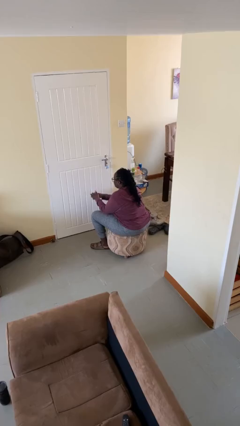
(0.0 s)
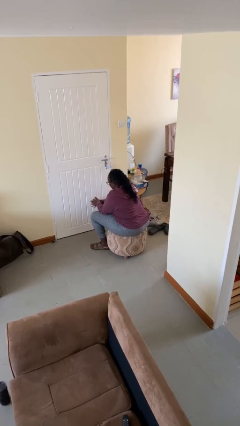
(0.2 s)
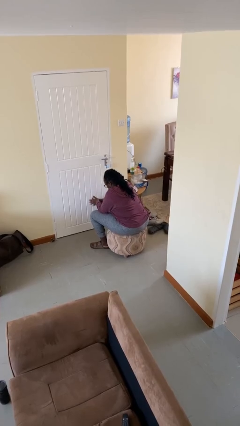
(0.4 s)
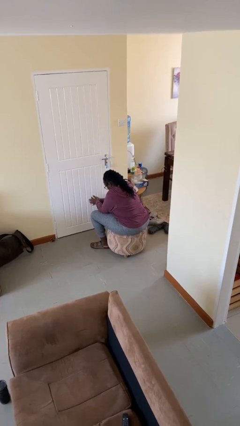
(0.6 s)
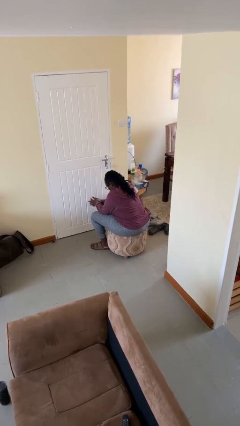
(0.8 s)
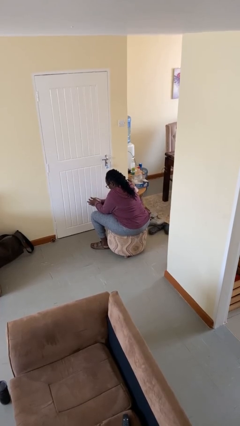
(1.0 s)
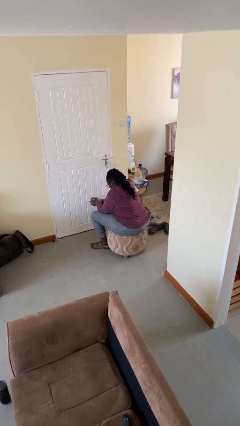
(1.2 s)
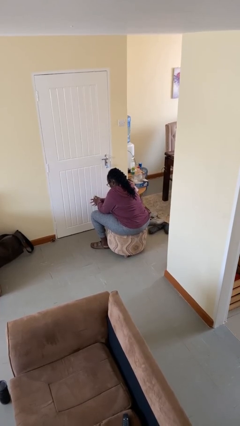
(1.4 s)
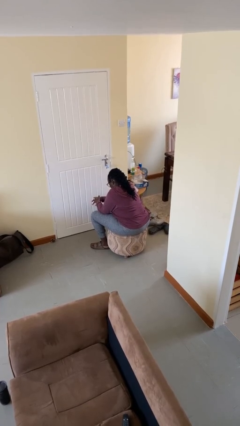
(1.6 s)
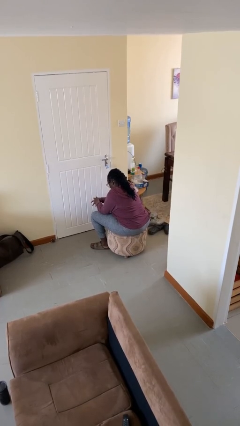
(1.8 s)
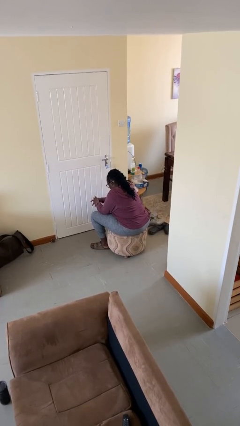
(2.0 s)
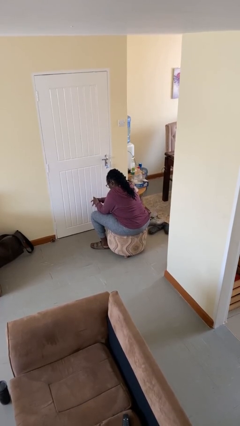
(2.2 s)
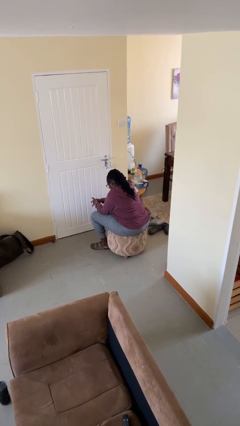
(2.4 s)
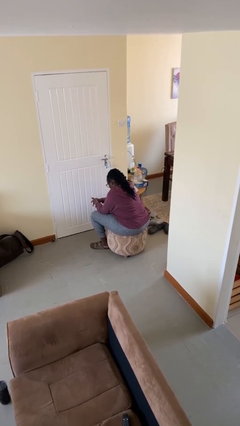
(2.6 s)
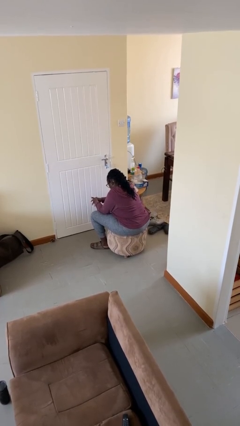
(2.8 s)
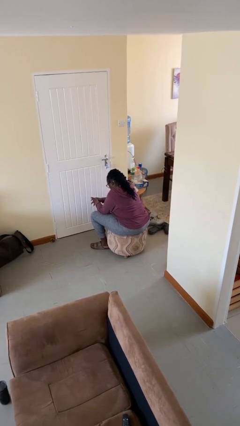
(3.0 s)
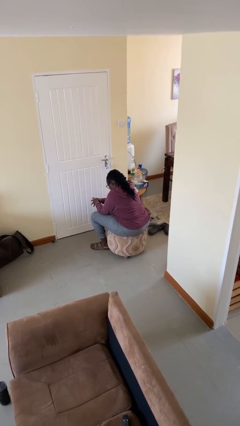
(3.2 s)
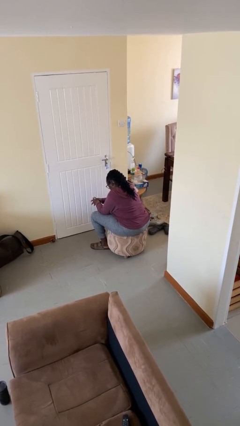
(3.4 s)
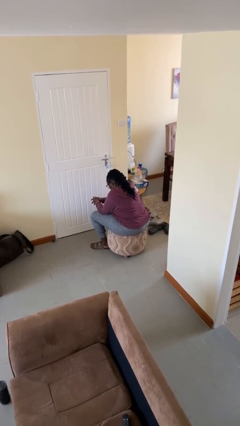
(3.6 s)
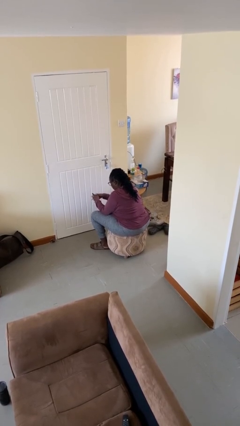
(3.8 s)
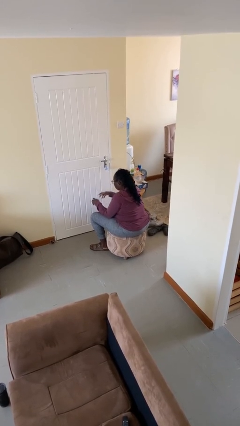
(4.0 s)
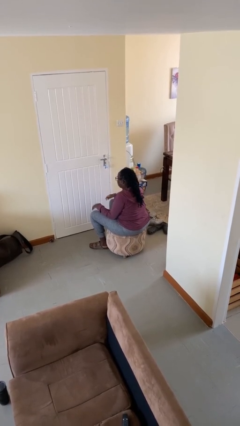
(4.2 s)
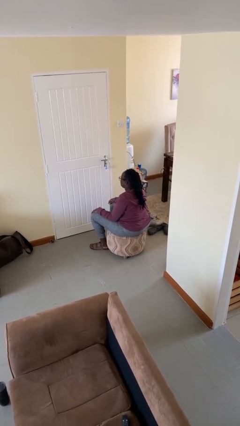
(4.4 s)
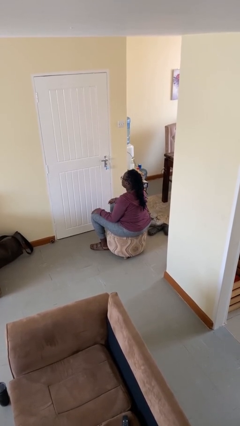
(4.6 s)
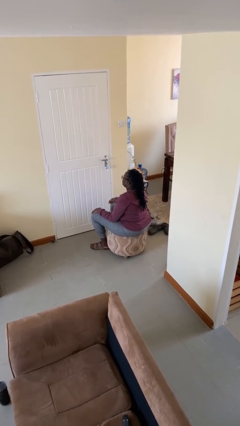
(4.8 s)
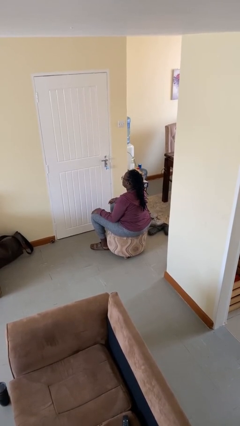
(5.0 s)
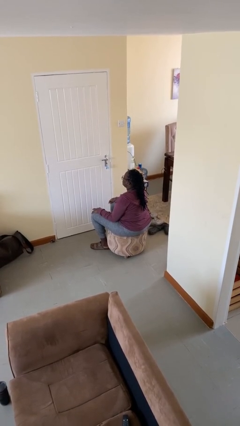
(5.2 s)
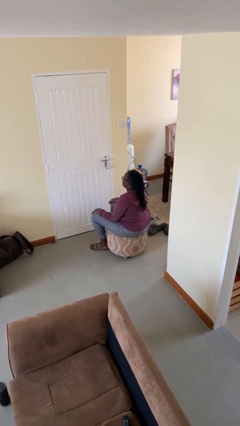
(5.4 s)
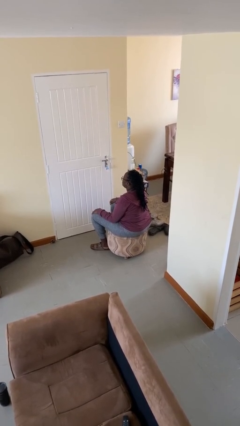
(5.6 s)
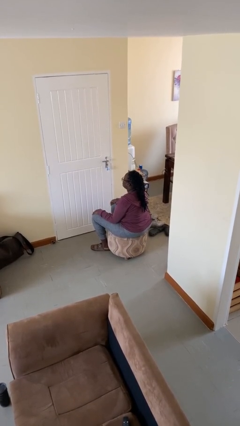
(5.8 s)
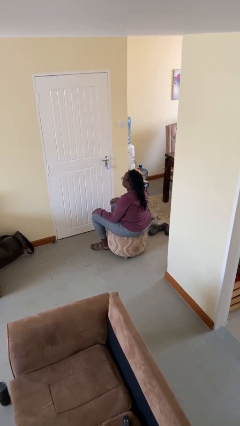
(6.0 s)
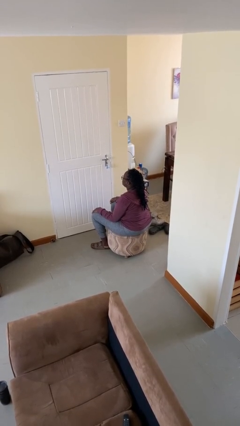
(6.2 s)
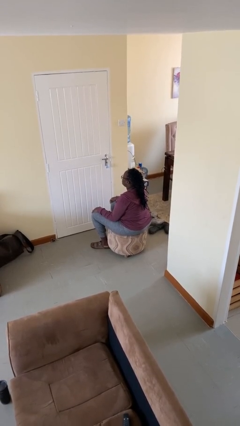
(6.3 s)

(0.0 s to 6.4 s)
person looks at hands in lap

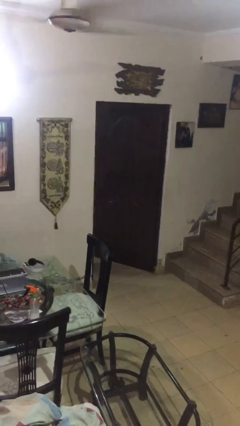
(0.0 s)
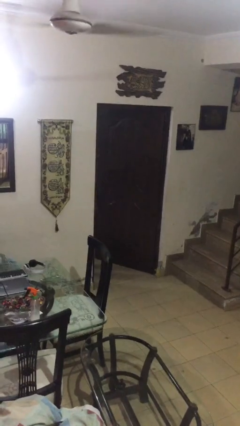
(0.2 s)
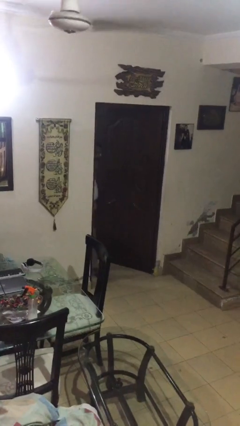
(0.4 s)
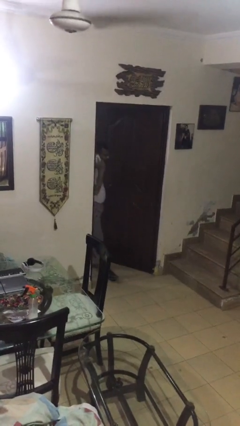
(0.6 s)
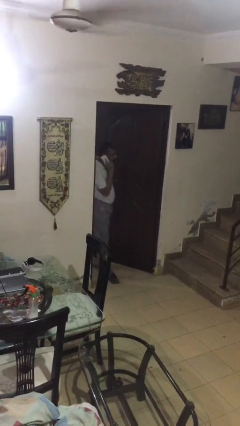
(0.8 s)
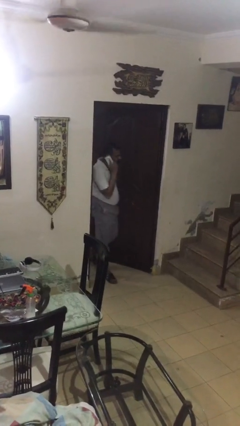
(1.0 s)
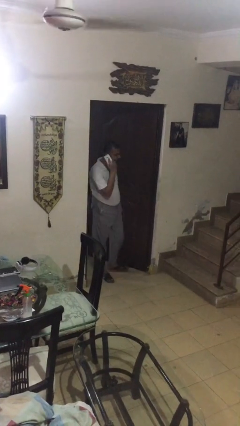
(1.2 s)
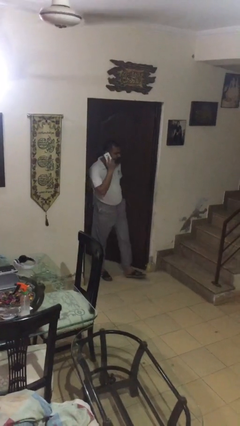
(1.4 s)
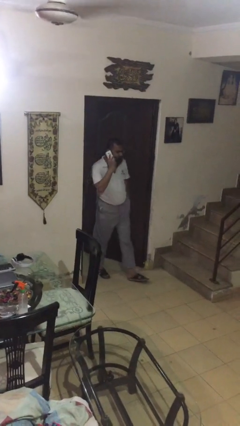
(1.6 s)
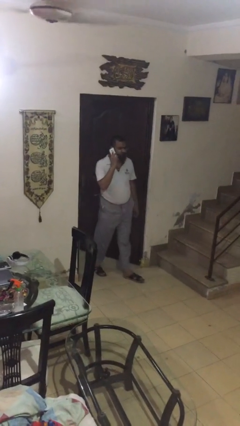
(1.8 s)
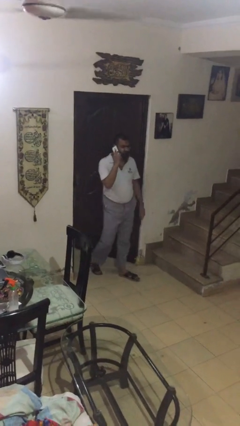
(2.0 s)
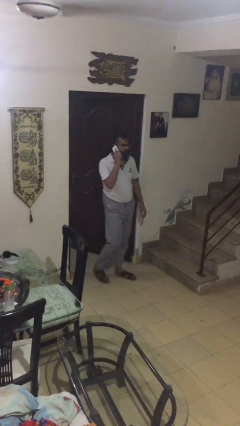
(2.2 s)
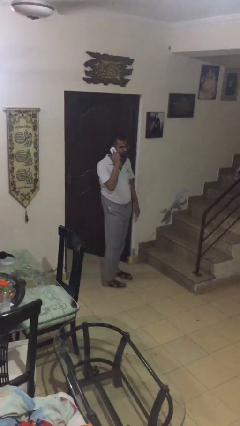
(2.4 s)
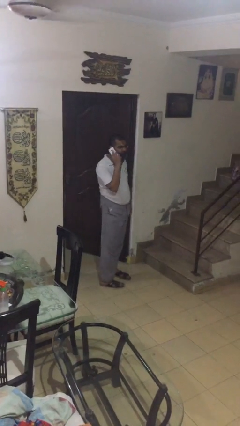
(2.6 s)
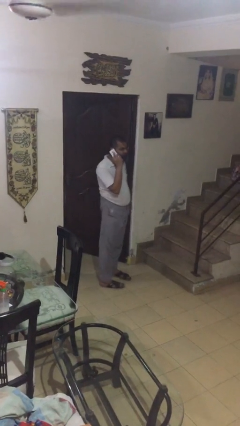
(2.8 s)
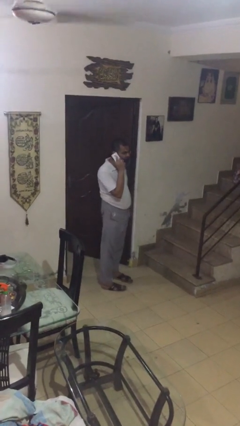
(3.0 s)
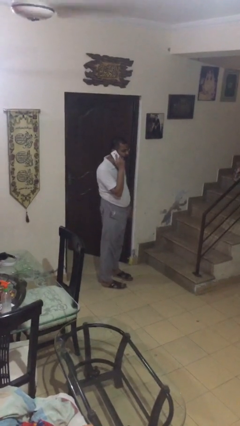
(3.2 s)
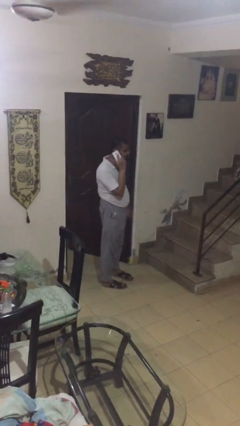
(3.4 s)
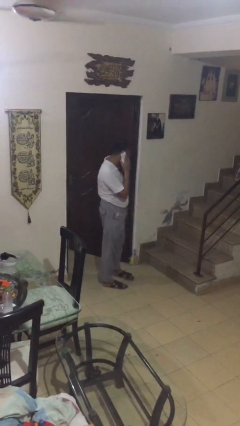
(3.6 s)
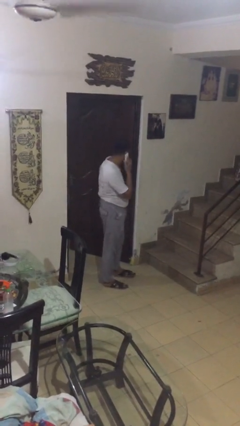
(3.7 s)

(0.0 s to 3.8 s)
person enters scene through structure

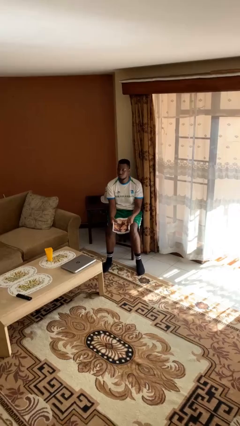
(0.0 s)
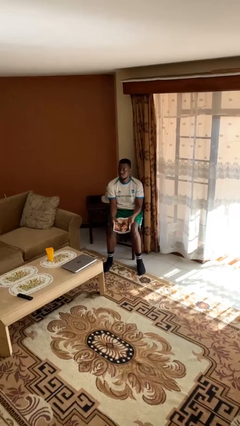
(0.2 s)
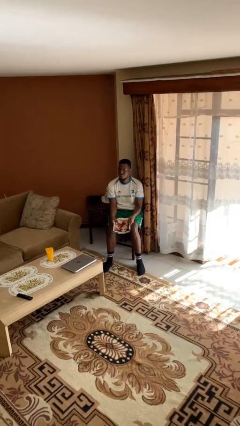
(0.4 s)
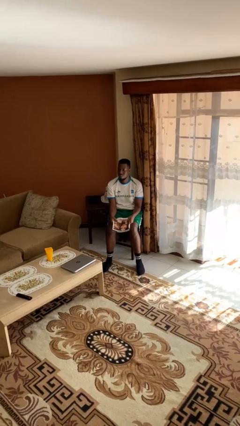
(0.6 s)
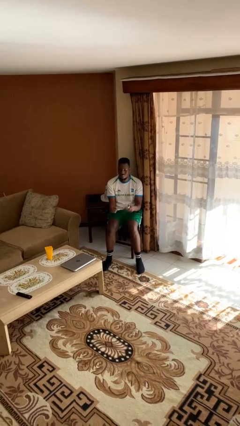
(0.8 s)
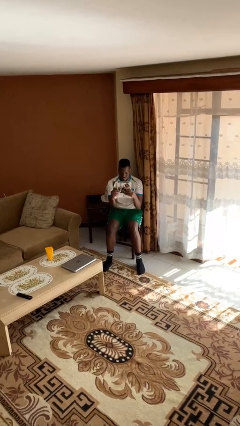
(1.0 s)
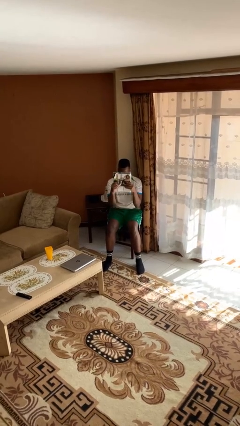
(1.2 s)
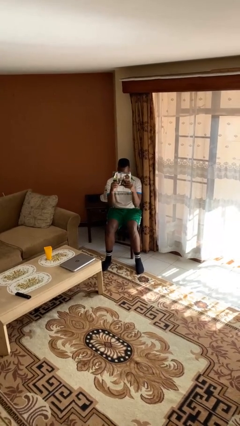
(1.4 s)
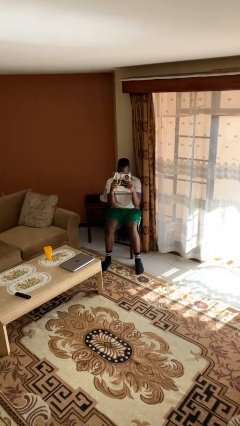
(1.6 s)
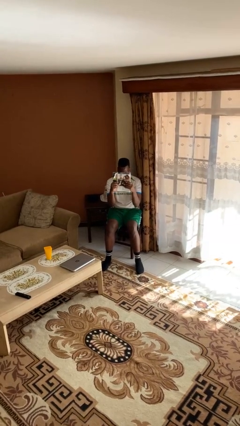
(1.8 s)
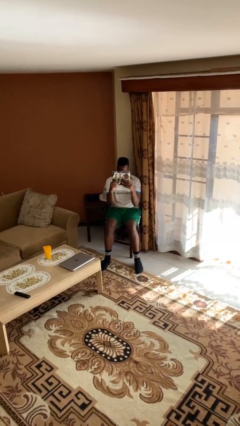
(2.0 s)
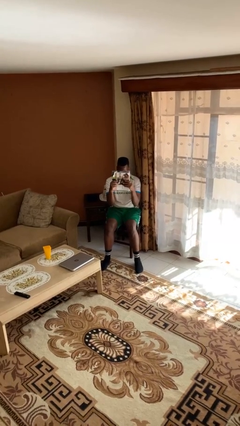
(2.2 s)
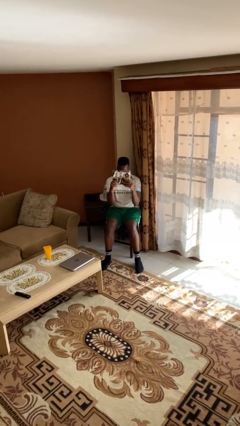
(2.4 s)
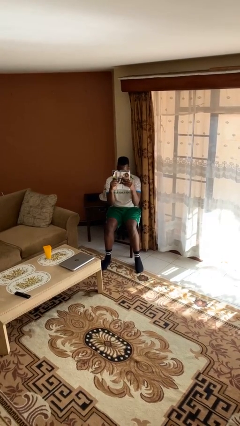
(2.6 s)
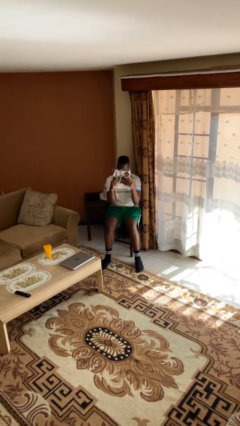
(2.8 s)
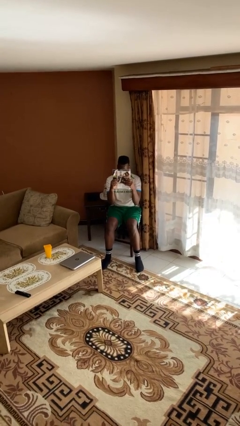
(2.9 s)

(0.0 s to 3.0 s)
person reads document

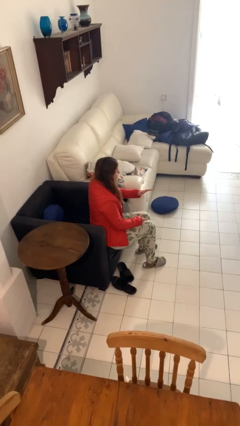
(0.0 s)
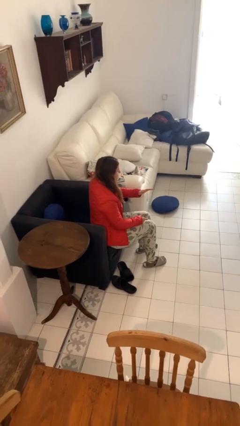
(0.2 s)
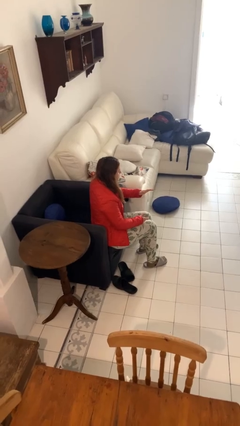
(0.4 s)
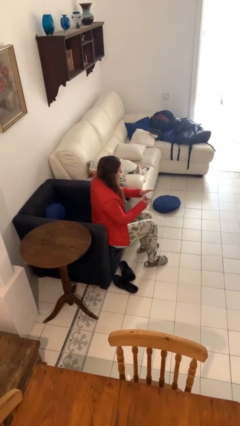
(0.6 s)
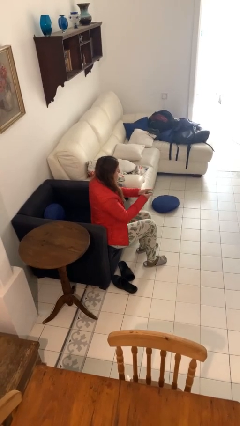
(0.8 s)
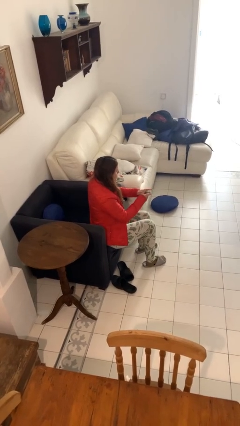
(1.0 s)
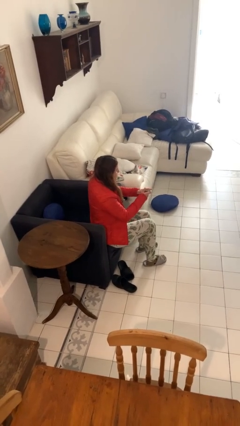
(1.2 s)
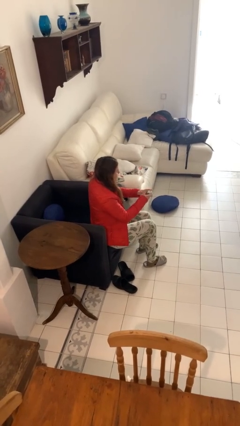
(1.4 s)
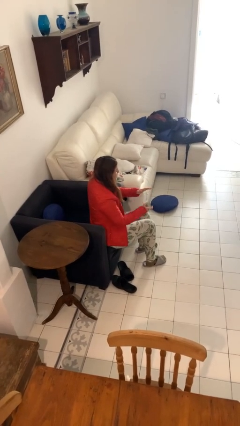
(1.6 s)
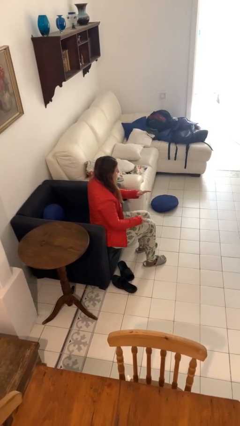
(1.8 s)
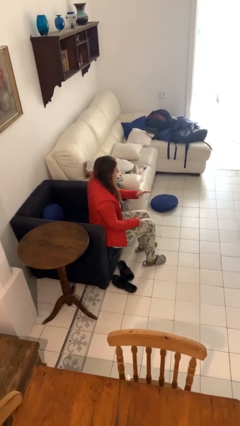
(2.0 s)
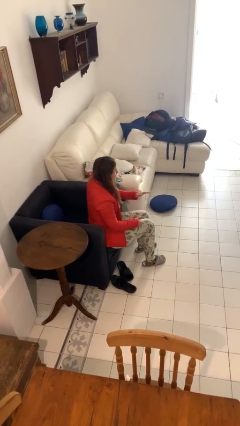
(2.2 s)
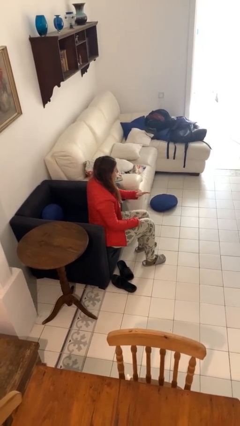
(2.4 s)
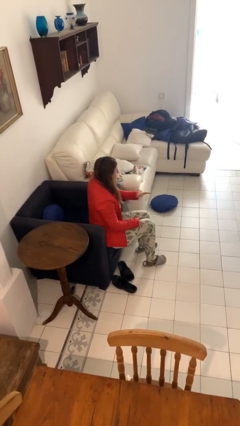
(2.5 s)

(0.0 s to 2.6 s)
person clips fingernails

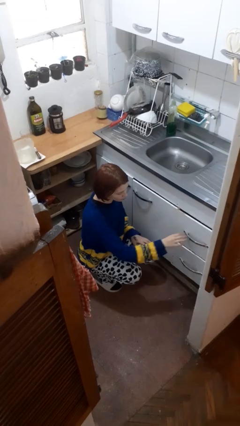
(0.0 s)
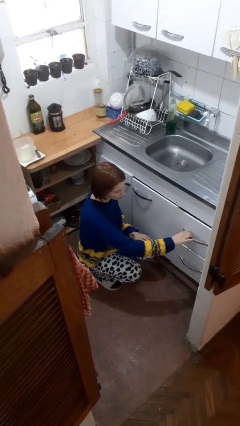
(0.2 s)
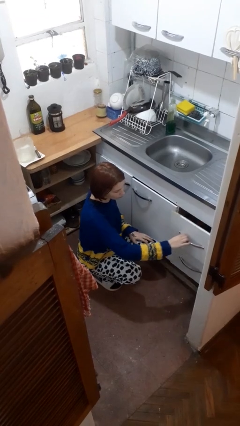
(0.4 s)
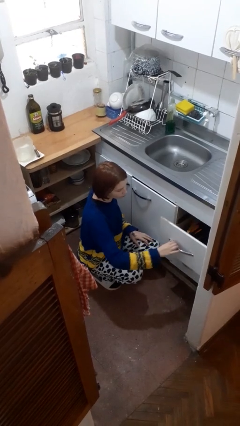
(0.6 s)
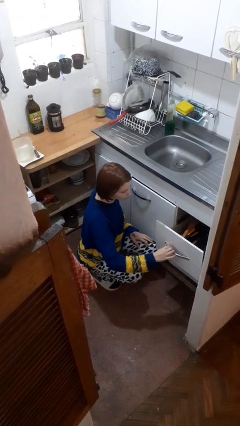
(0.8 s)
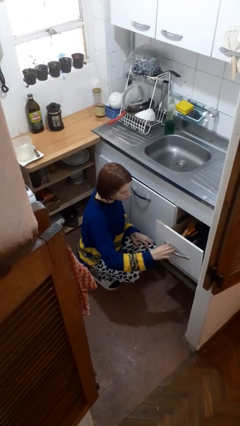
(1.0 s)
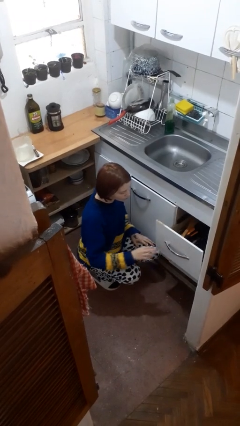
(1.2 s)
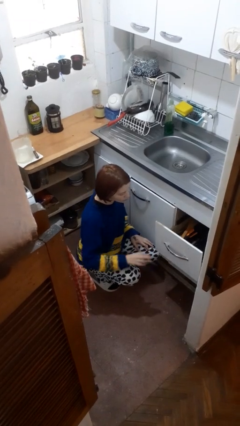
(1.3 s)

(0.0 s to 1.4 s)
person opens kitchen drawer

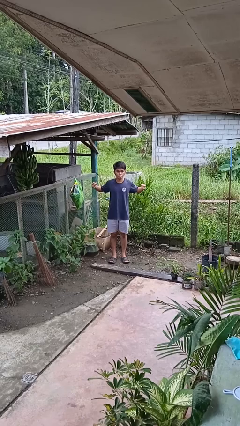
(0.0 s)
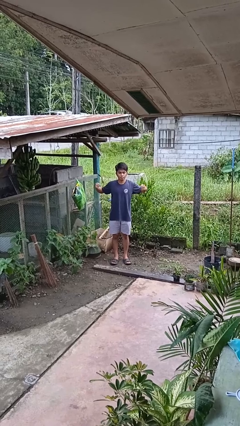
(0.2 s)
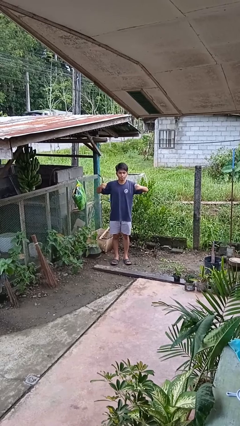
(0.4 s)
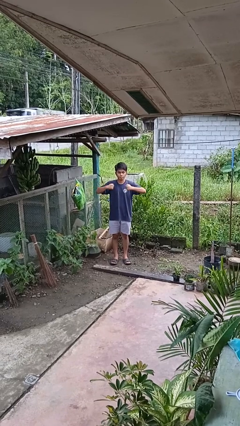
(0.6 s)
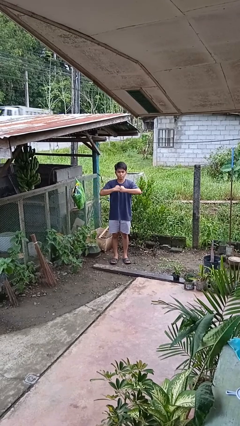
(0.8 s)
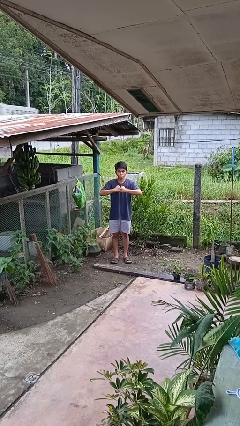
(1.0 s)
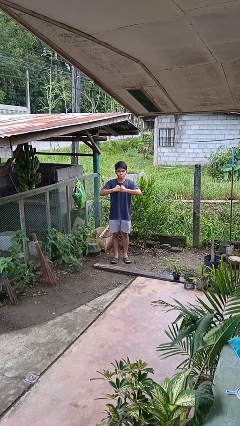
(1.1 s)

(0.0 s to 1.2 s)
person gestures zoom out
